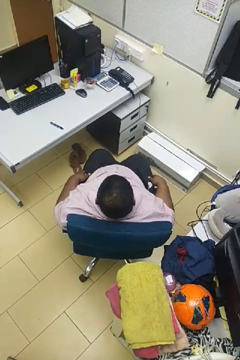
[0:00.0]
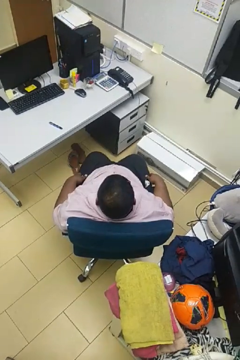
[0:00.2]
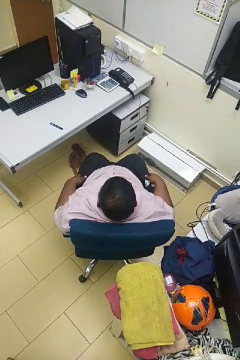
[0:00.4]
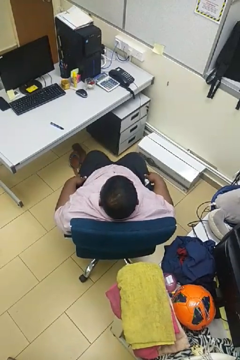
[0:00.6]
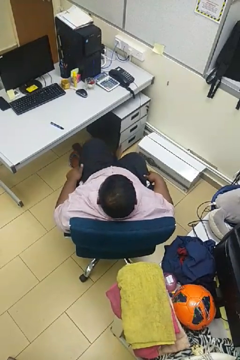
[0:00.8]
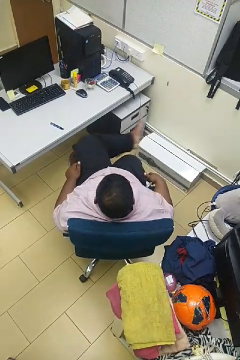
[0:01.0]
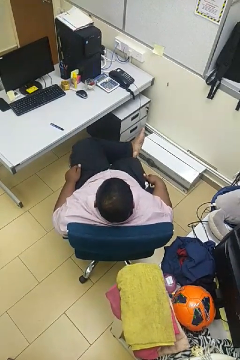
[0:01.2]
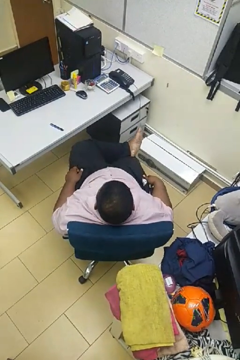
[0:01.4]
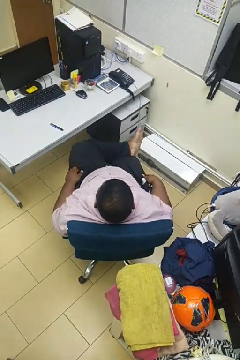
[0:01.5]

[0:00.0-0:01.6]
person crosses legs

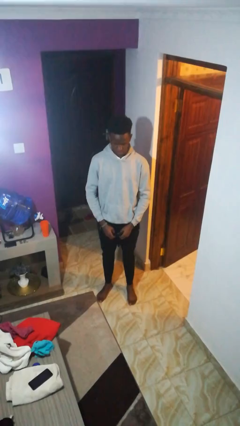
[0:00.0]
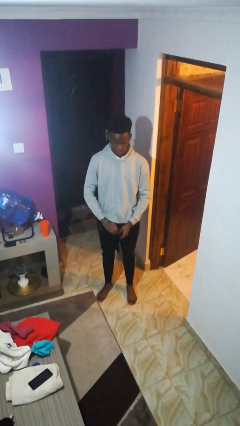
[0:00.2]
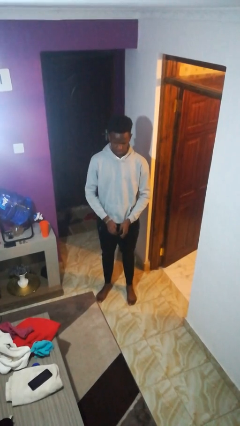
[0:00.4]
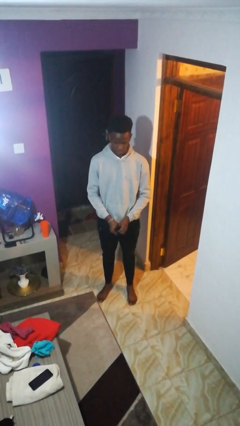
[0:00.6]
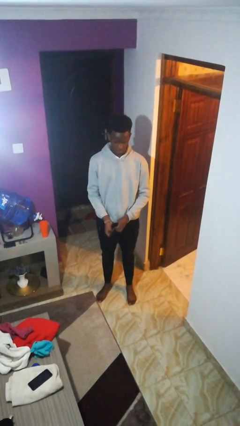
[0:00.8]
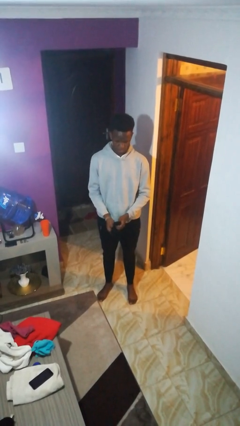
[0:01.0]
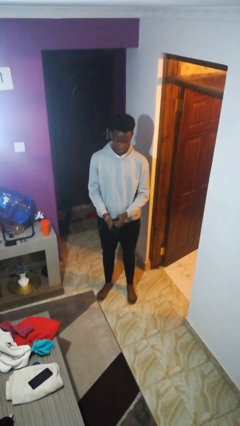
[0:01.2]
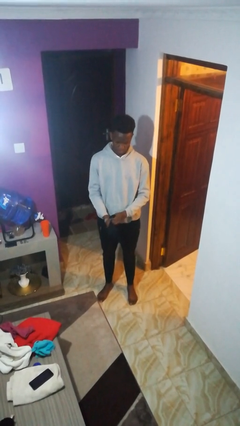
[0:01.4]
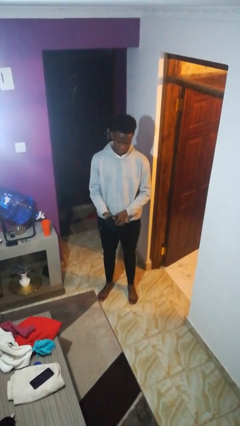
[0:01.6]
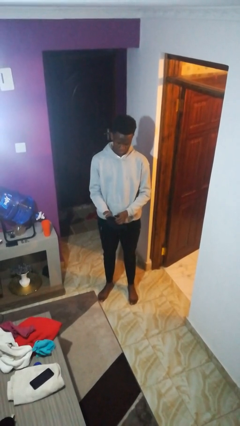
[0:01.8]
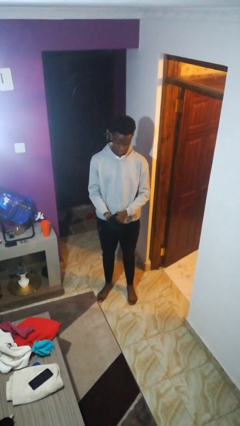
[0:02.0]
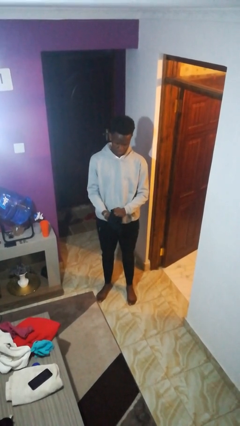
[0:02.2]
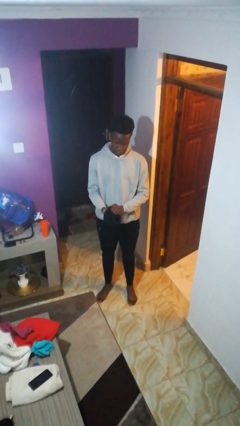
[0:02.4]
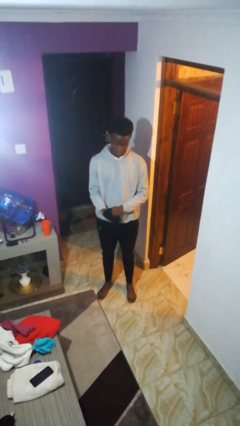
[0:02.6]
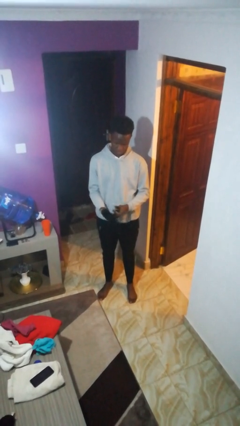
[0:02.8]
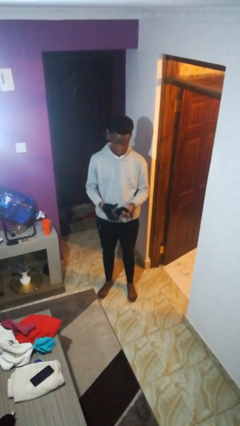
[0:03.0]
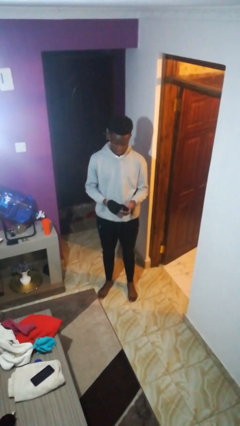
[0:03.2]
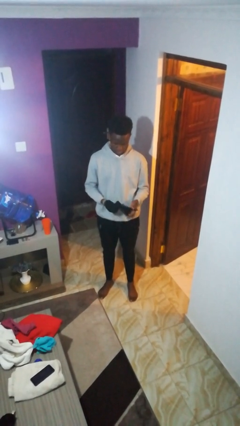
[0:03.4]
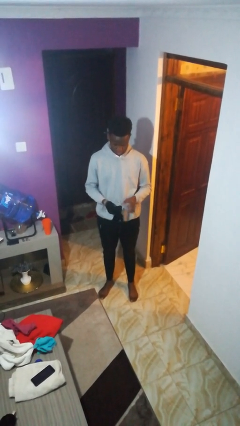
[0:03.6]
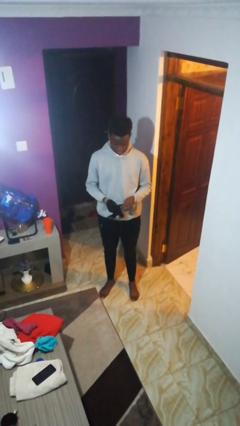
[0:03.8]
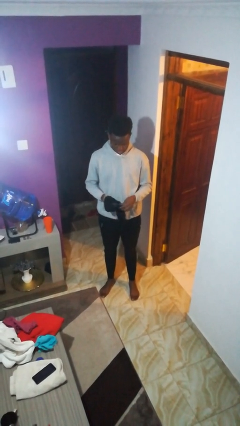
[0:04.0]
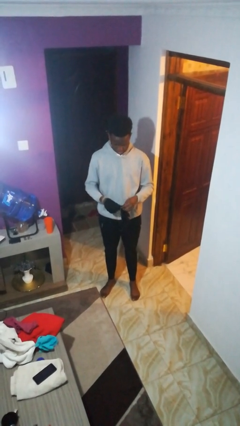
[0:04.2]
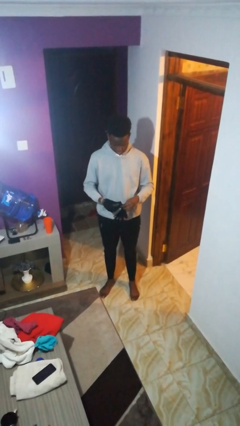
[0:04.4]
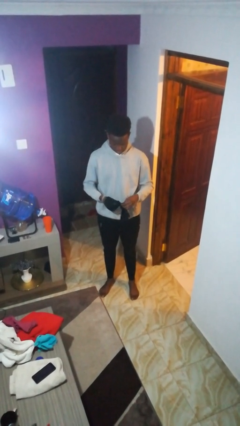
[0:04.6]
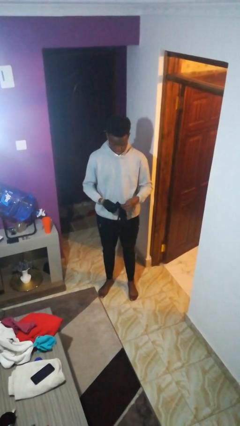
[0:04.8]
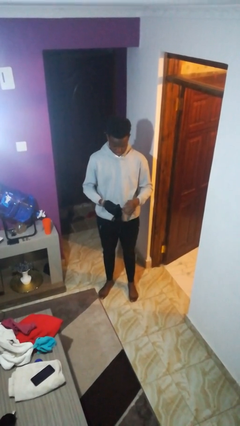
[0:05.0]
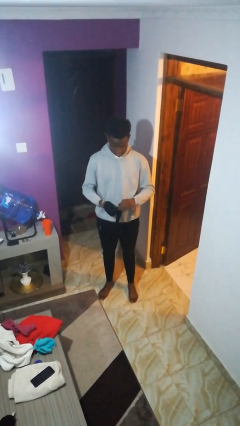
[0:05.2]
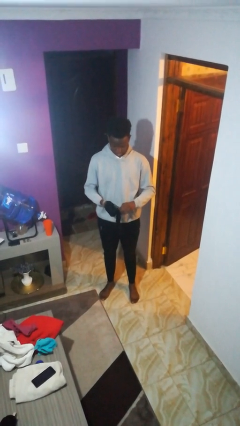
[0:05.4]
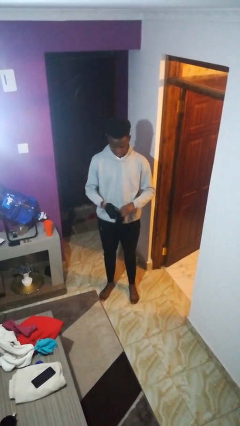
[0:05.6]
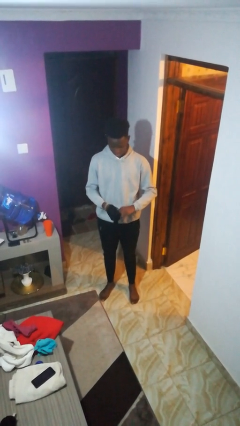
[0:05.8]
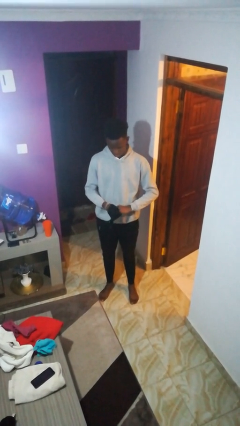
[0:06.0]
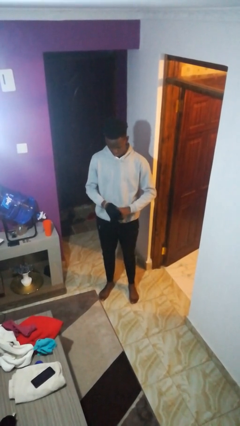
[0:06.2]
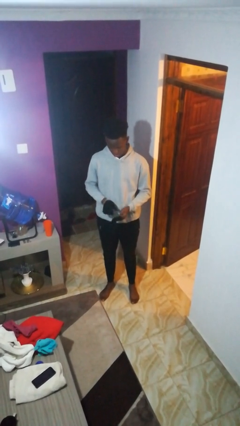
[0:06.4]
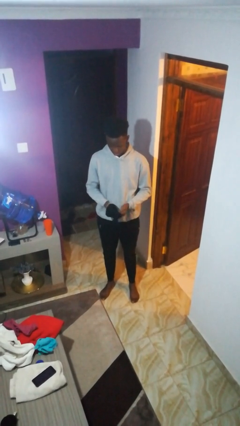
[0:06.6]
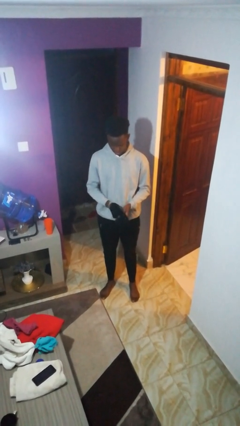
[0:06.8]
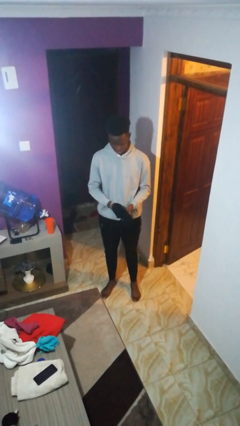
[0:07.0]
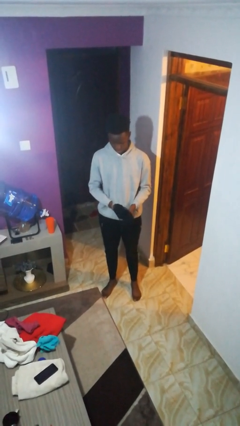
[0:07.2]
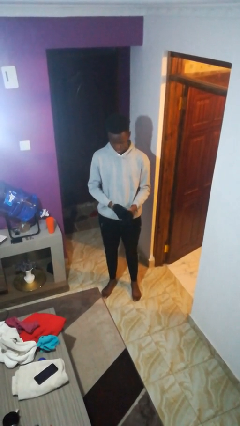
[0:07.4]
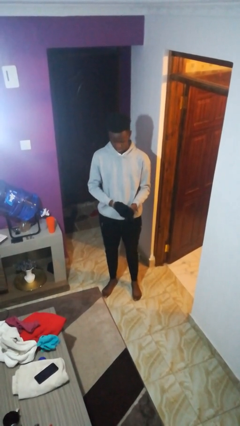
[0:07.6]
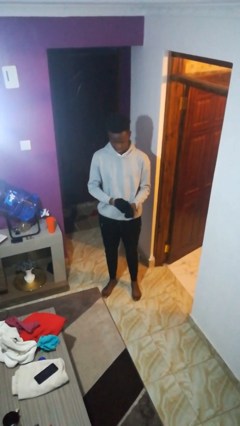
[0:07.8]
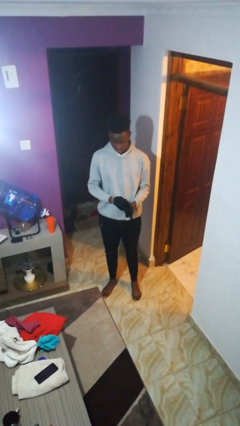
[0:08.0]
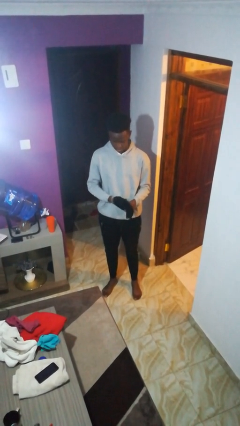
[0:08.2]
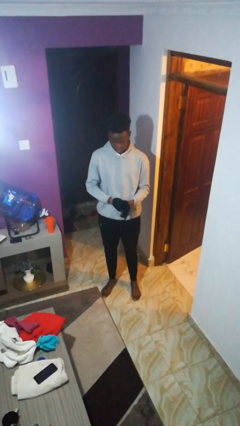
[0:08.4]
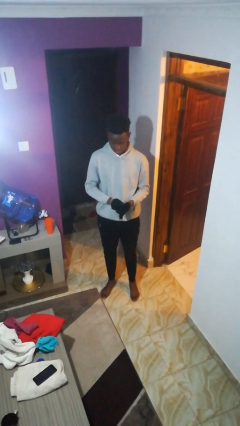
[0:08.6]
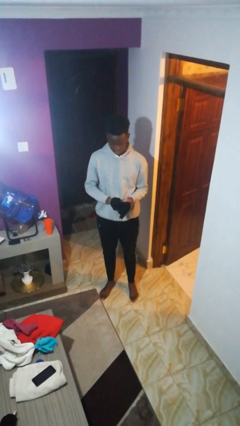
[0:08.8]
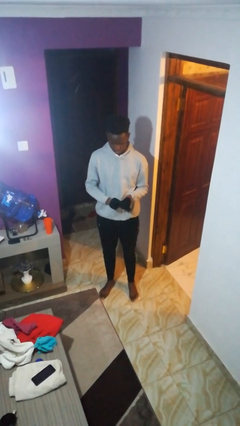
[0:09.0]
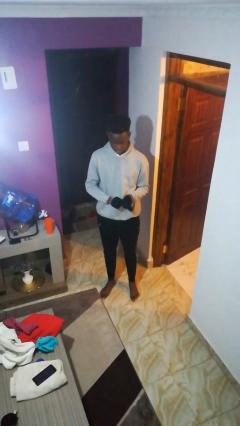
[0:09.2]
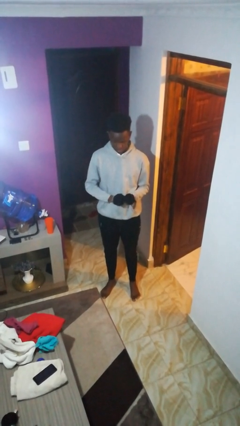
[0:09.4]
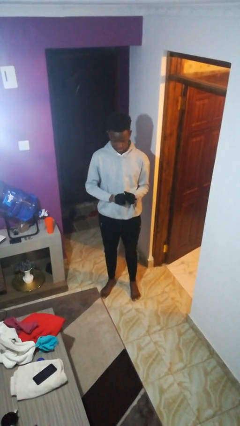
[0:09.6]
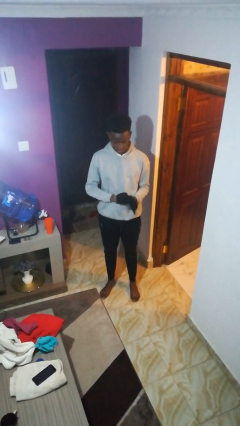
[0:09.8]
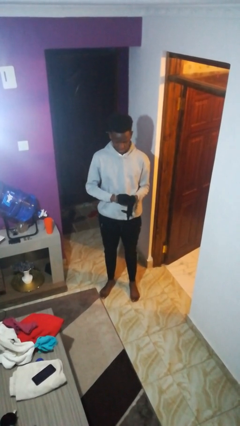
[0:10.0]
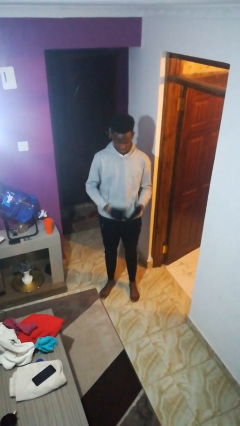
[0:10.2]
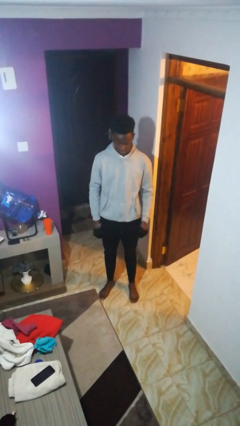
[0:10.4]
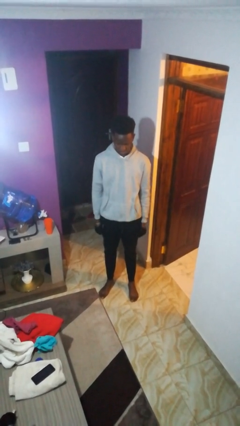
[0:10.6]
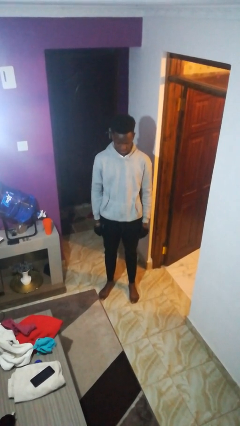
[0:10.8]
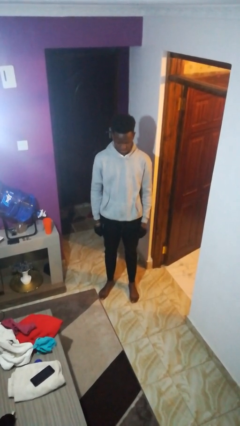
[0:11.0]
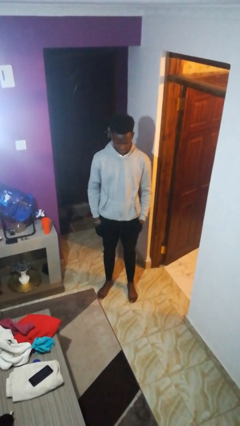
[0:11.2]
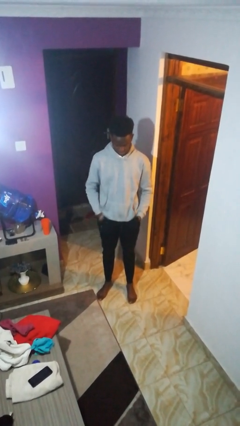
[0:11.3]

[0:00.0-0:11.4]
person puts on gloves

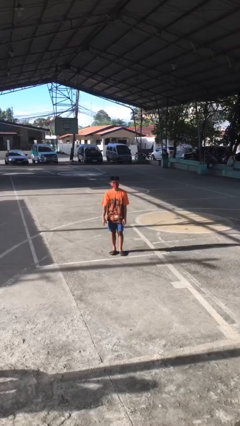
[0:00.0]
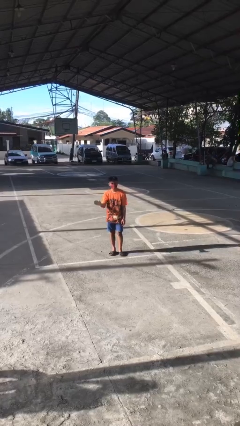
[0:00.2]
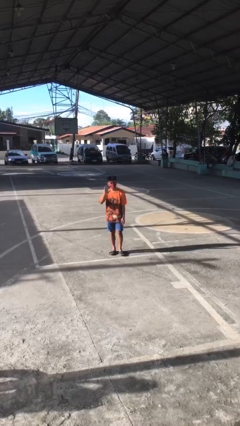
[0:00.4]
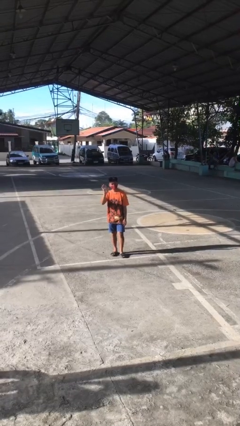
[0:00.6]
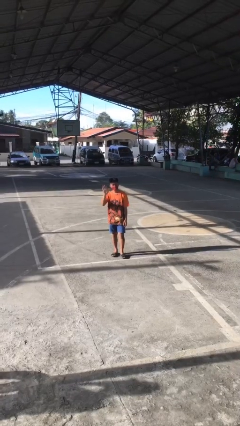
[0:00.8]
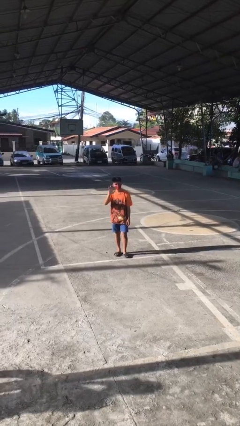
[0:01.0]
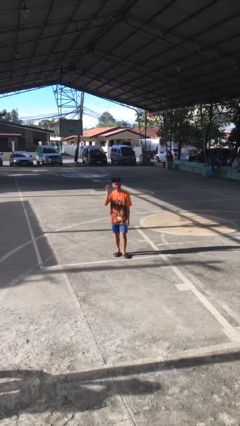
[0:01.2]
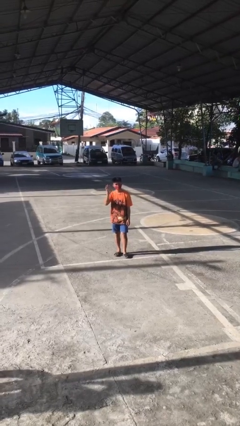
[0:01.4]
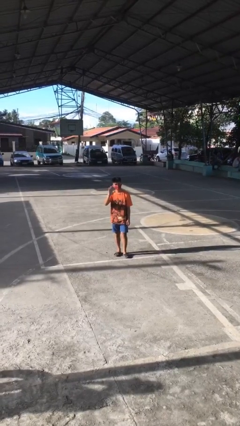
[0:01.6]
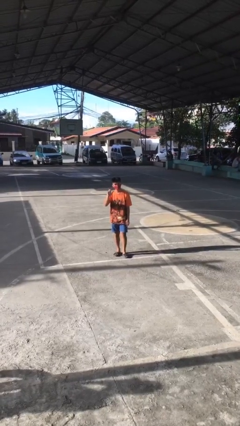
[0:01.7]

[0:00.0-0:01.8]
person waves at person

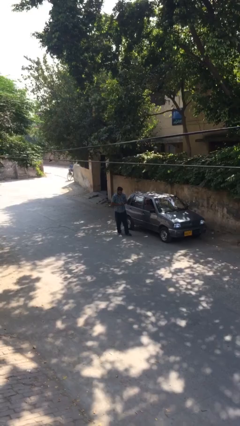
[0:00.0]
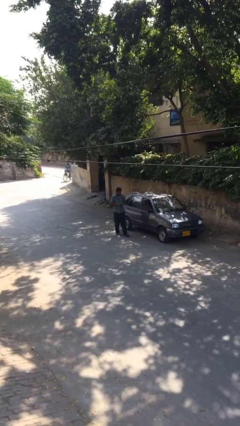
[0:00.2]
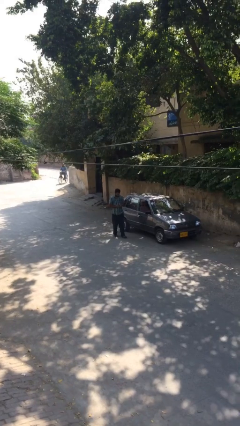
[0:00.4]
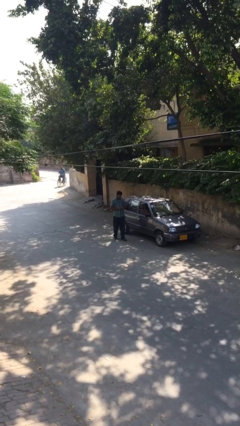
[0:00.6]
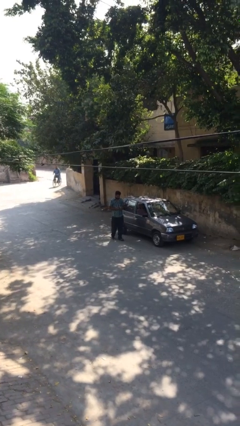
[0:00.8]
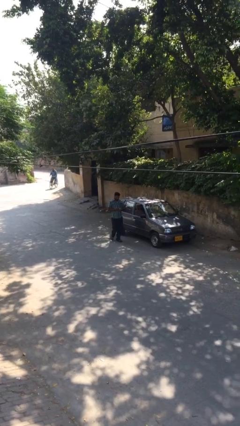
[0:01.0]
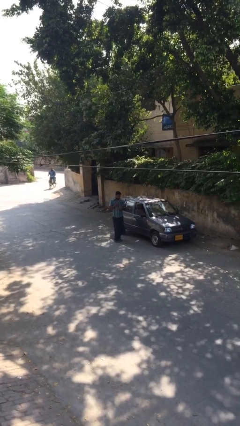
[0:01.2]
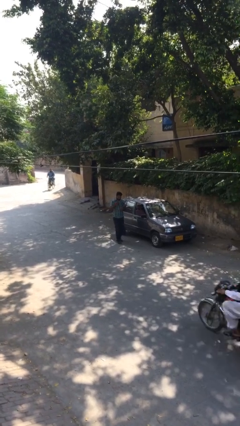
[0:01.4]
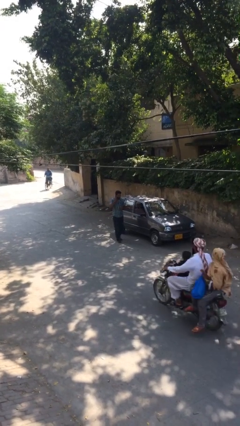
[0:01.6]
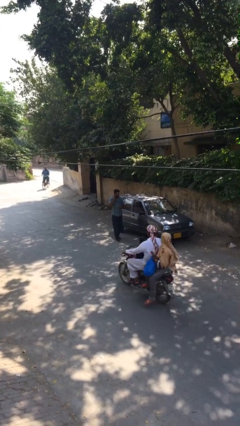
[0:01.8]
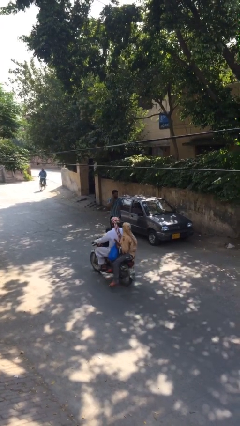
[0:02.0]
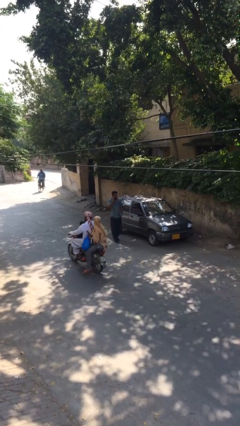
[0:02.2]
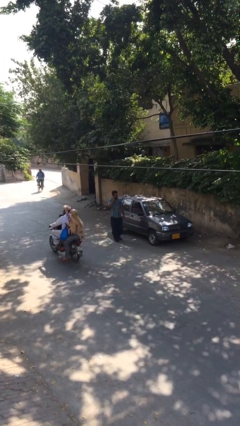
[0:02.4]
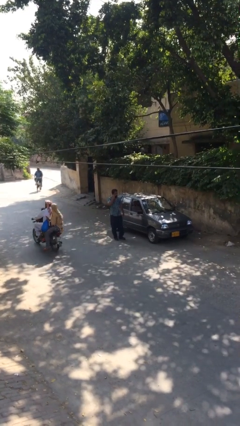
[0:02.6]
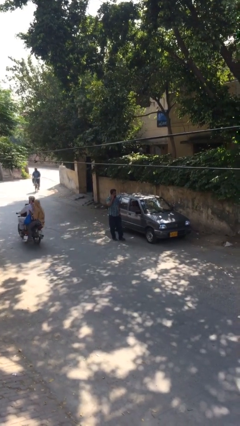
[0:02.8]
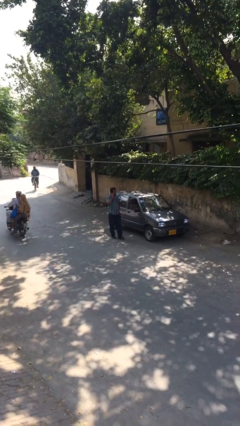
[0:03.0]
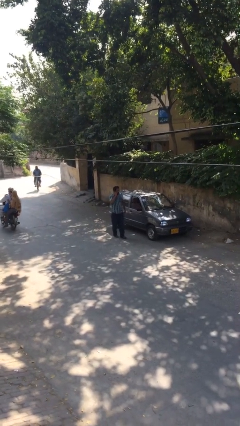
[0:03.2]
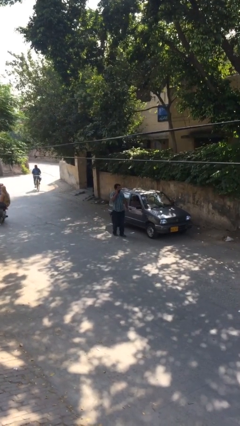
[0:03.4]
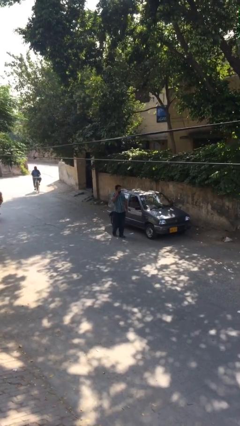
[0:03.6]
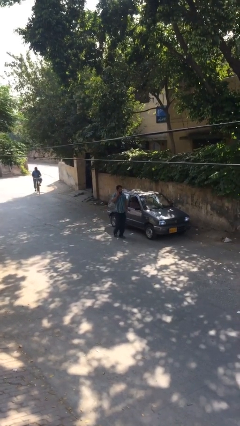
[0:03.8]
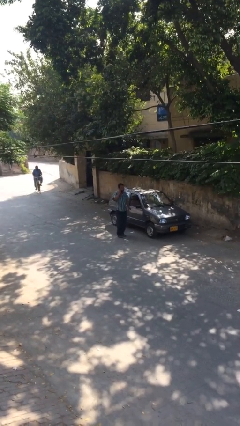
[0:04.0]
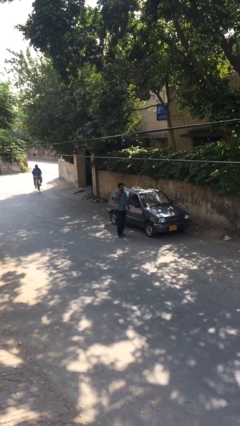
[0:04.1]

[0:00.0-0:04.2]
person talks on phone
